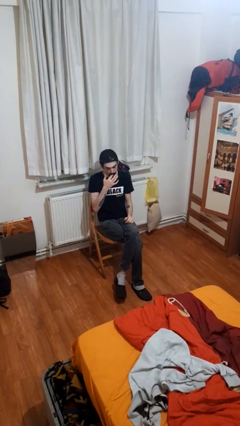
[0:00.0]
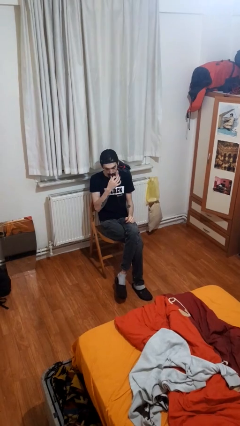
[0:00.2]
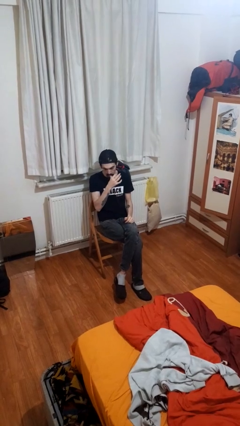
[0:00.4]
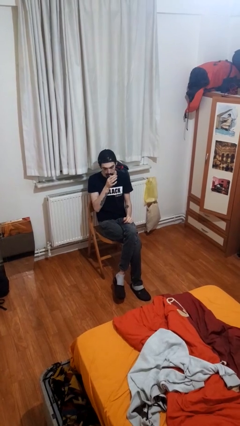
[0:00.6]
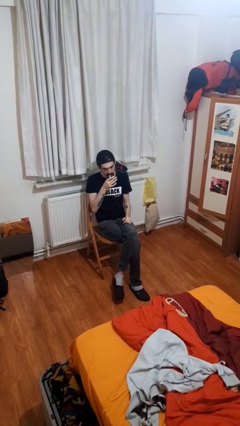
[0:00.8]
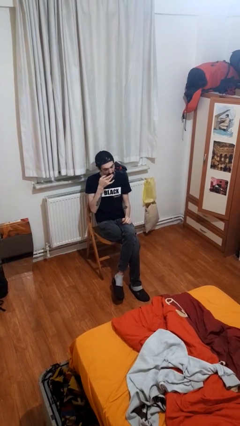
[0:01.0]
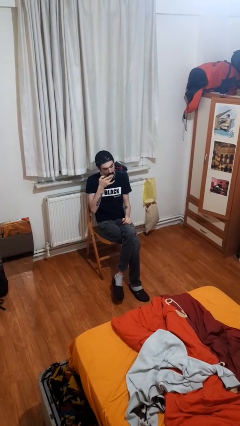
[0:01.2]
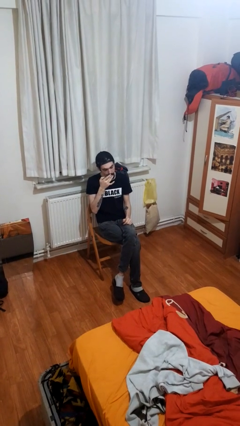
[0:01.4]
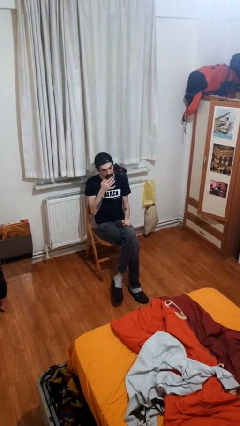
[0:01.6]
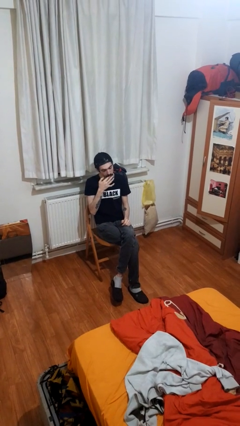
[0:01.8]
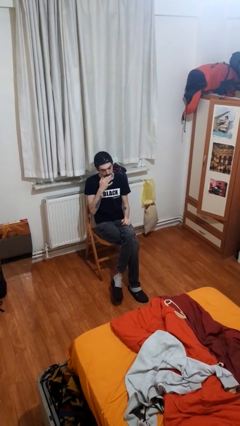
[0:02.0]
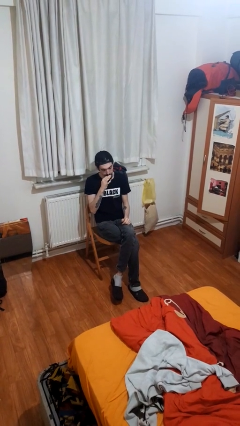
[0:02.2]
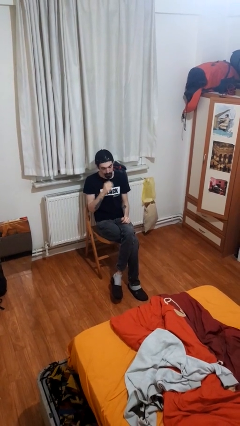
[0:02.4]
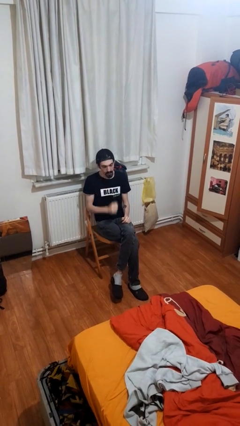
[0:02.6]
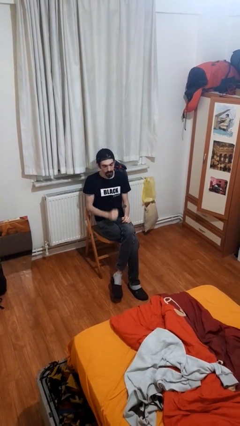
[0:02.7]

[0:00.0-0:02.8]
person licks fingers

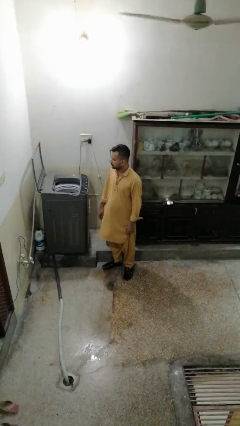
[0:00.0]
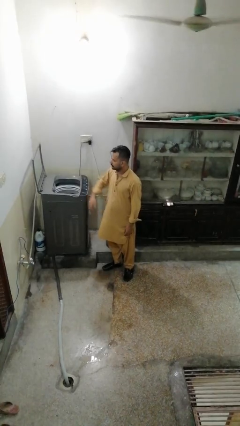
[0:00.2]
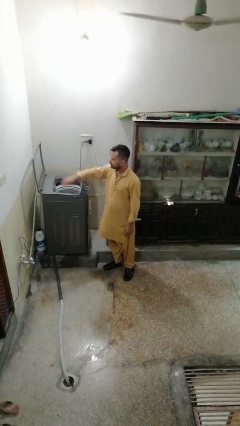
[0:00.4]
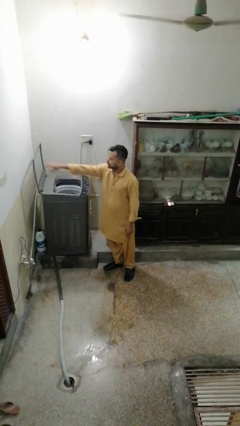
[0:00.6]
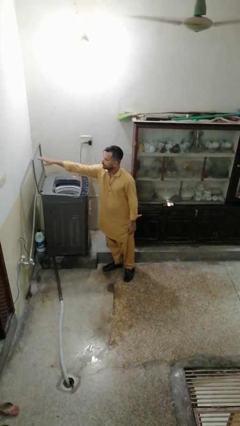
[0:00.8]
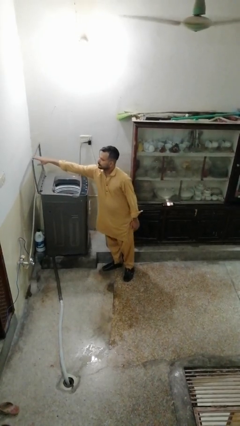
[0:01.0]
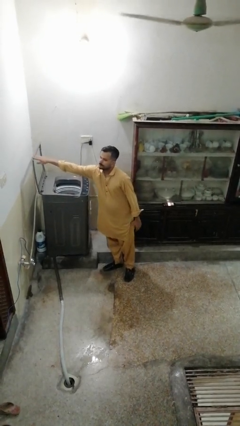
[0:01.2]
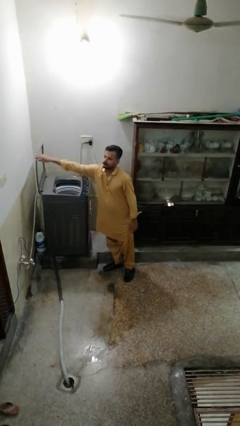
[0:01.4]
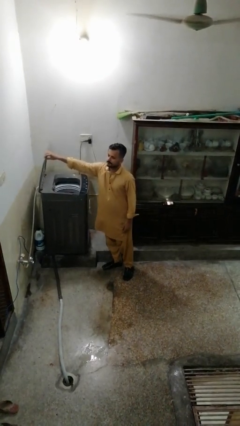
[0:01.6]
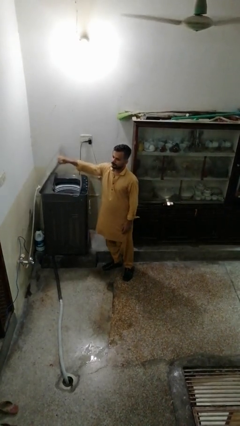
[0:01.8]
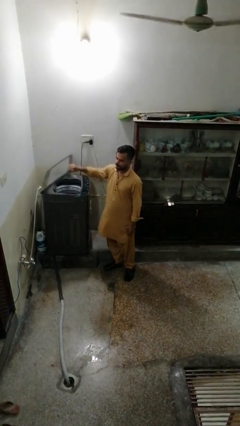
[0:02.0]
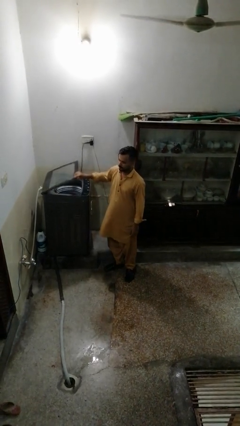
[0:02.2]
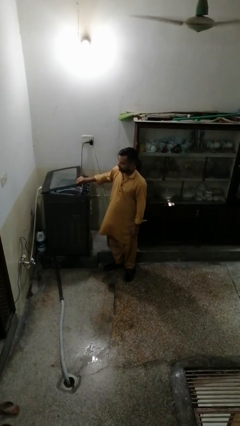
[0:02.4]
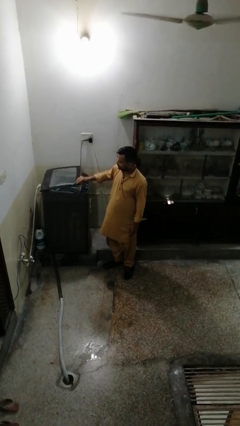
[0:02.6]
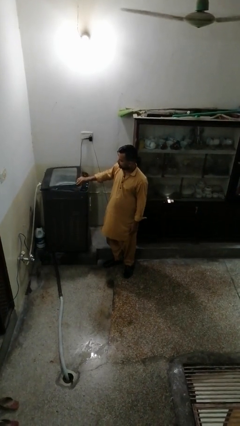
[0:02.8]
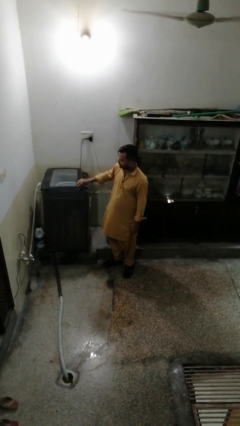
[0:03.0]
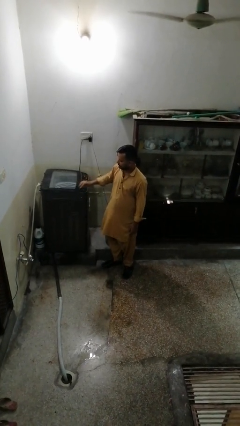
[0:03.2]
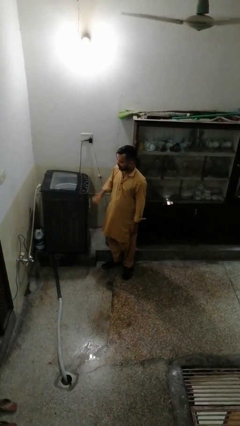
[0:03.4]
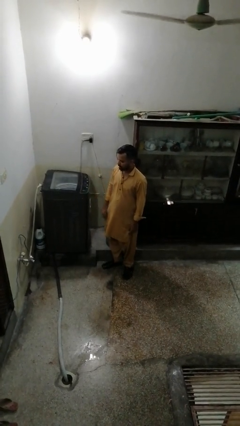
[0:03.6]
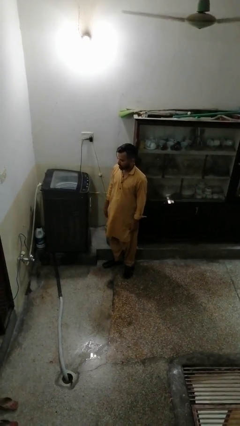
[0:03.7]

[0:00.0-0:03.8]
person closes clothes washer

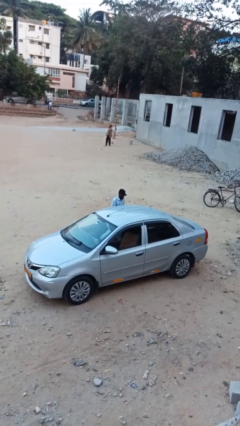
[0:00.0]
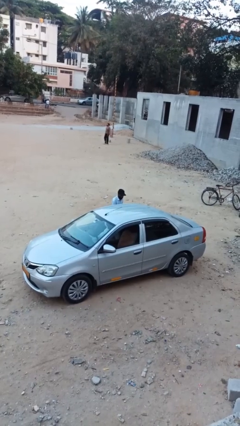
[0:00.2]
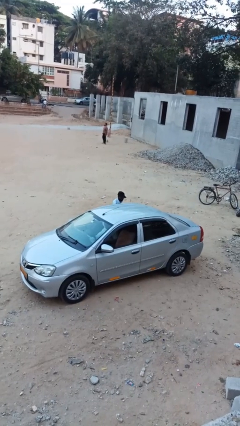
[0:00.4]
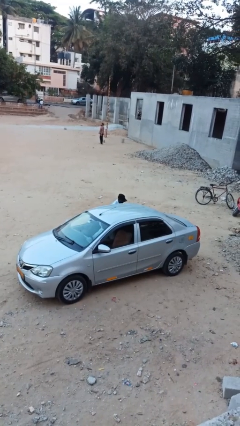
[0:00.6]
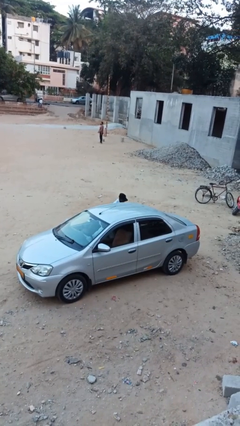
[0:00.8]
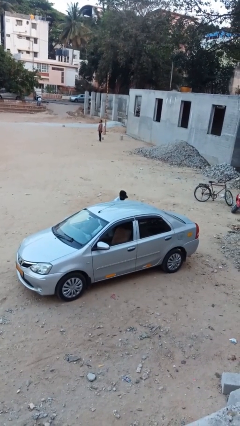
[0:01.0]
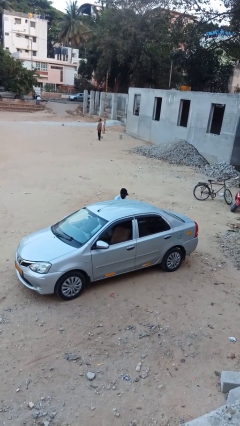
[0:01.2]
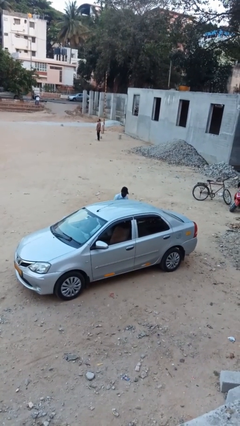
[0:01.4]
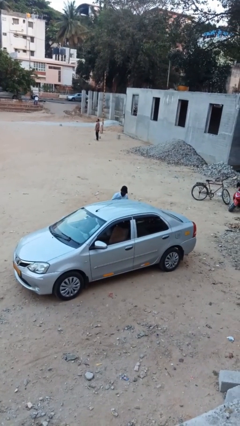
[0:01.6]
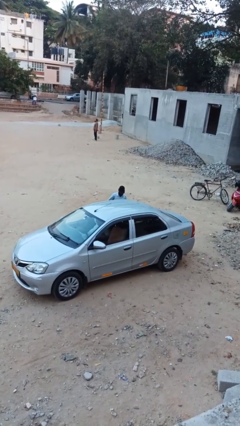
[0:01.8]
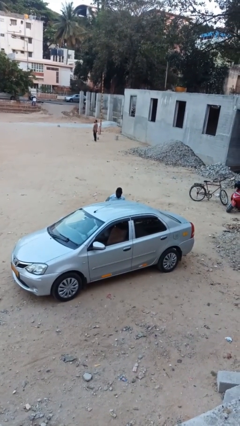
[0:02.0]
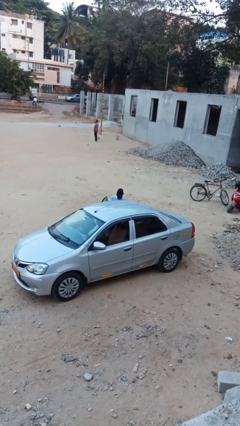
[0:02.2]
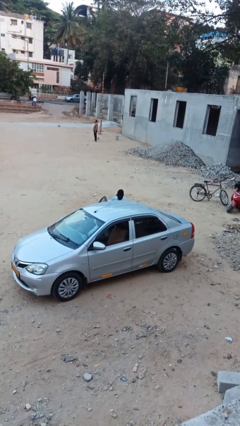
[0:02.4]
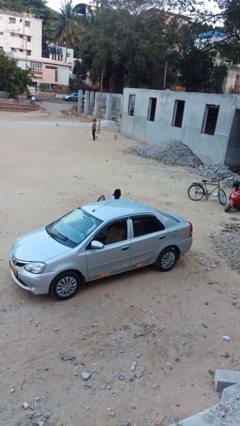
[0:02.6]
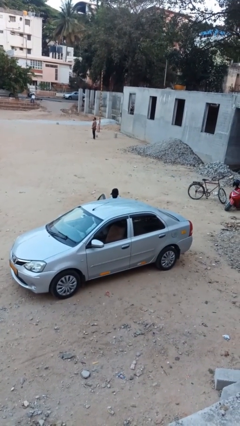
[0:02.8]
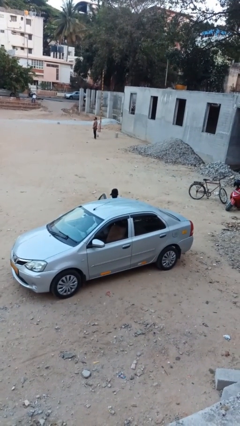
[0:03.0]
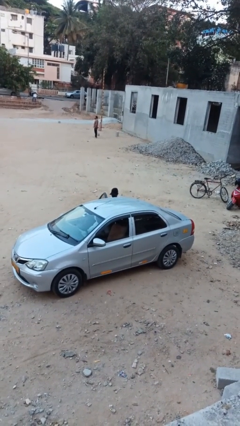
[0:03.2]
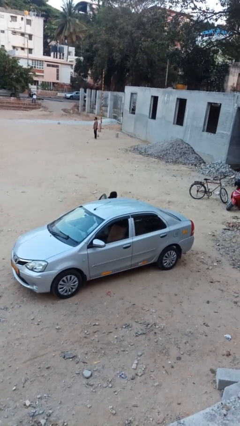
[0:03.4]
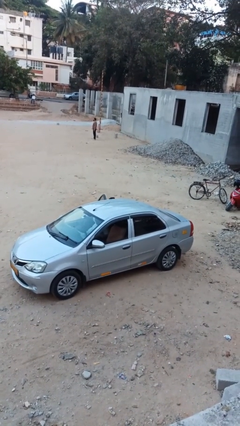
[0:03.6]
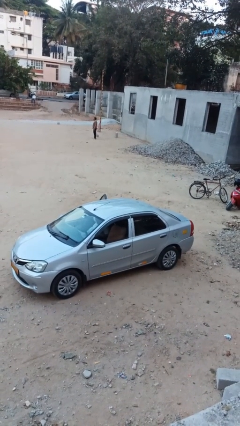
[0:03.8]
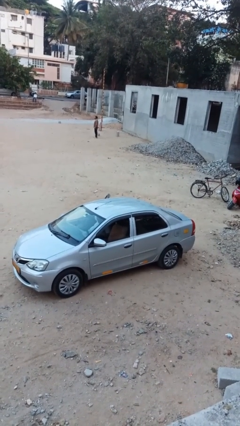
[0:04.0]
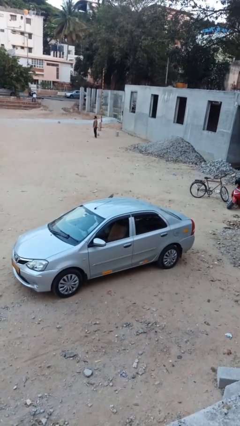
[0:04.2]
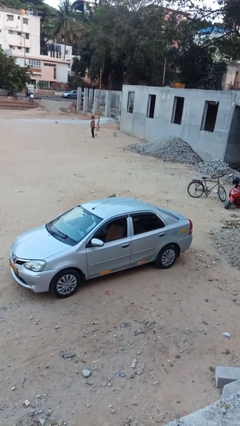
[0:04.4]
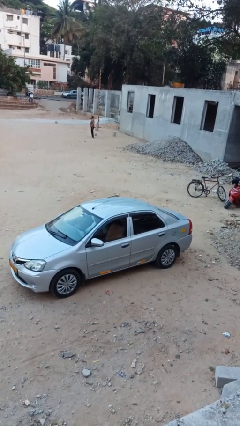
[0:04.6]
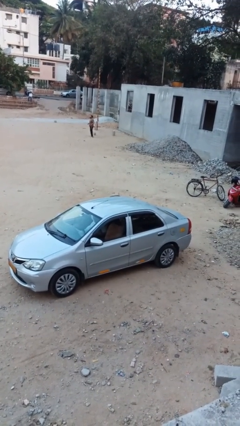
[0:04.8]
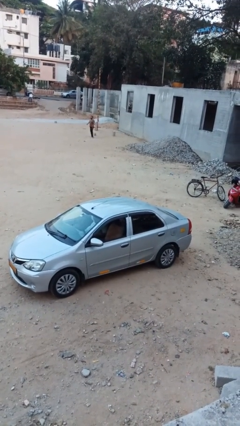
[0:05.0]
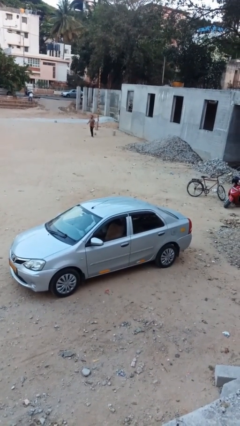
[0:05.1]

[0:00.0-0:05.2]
person enters car

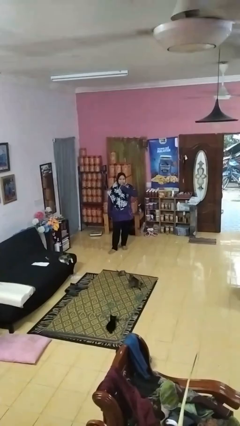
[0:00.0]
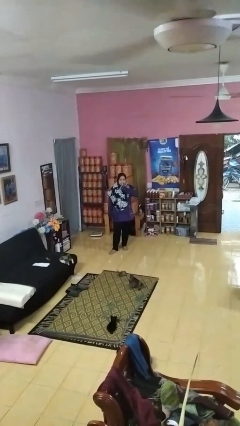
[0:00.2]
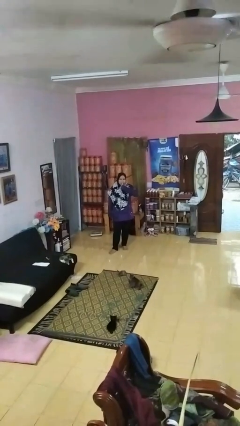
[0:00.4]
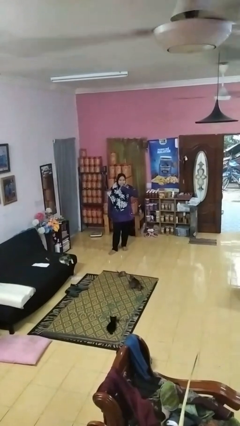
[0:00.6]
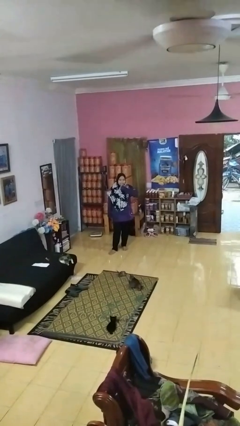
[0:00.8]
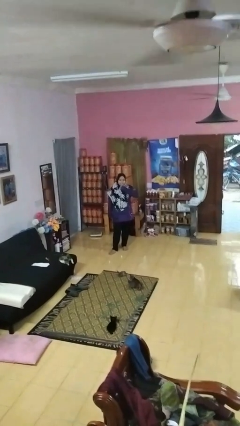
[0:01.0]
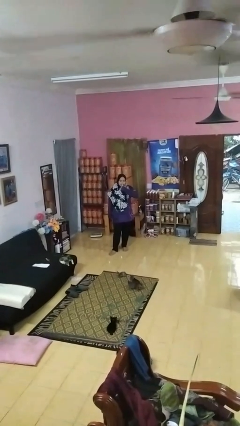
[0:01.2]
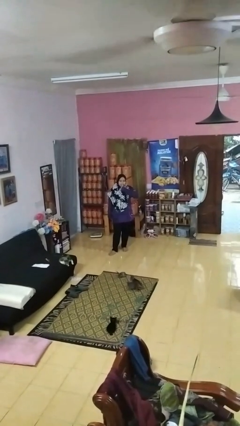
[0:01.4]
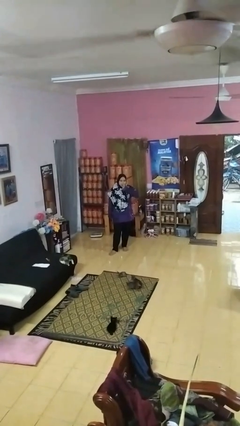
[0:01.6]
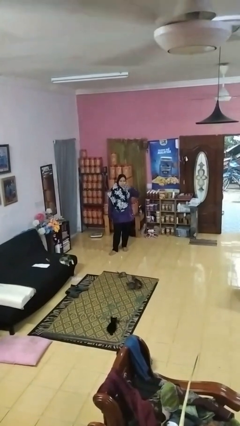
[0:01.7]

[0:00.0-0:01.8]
person gestures be quiet

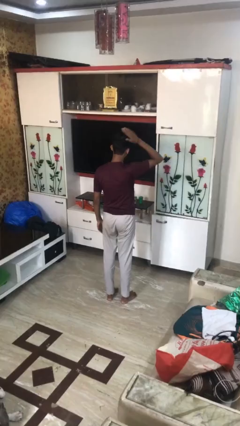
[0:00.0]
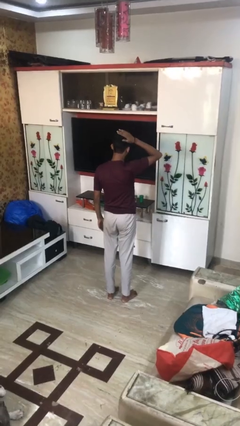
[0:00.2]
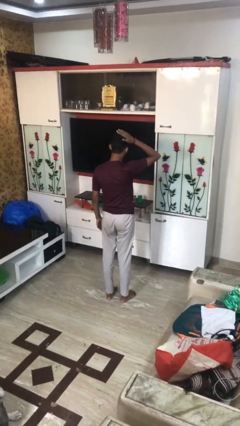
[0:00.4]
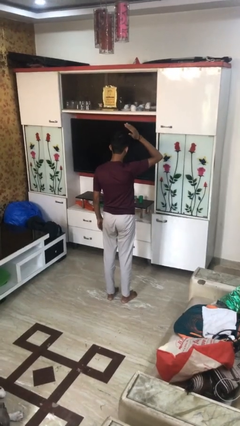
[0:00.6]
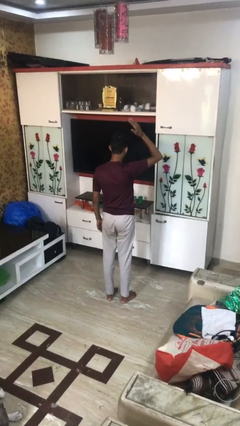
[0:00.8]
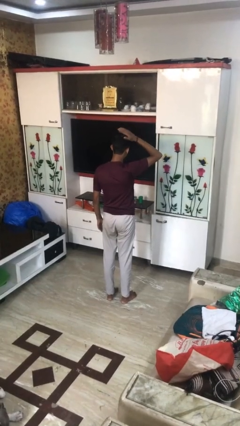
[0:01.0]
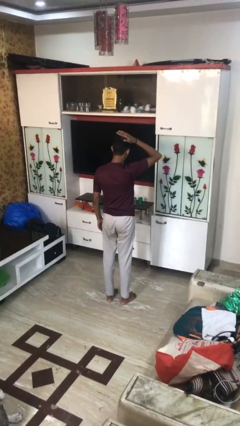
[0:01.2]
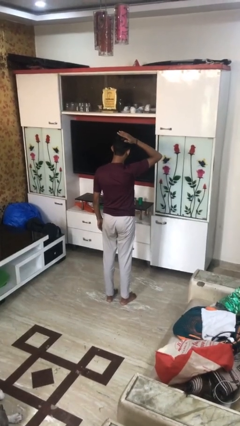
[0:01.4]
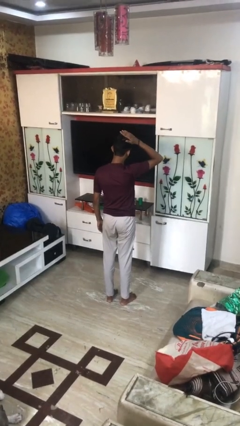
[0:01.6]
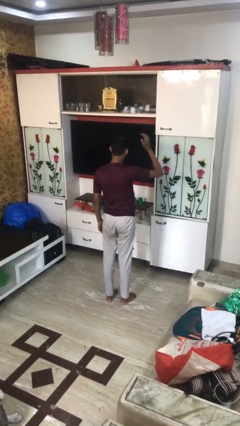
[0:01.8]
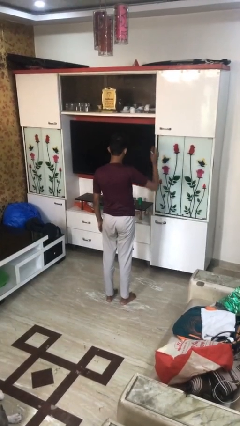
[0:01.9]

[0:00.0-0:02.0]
person pats head

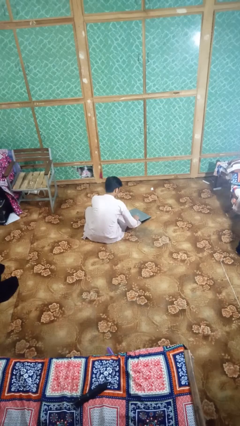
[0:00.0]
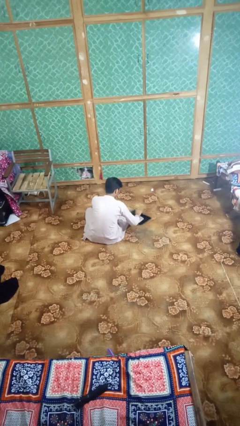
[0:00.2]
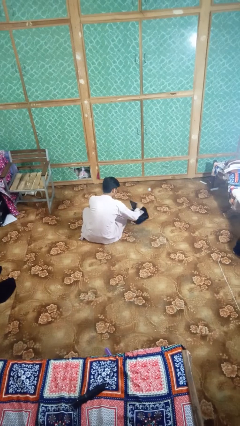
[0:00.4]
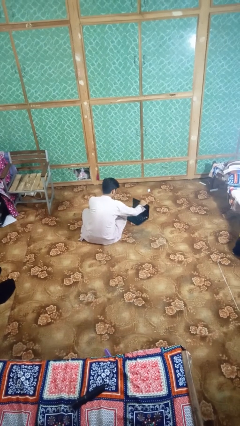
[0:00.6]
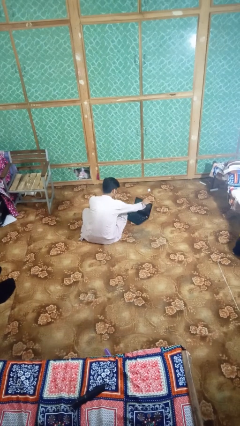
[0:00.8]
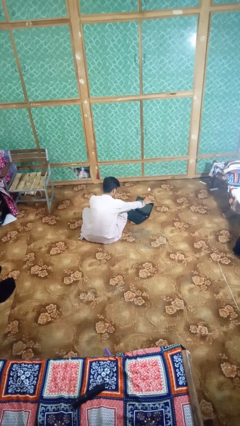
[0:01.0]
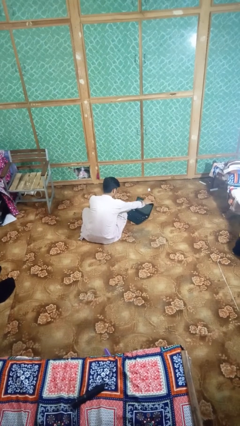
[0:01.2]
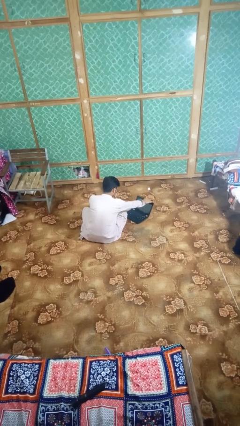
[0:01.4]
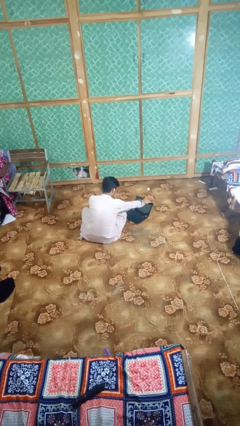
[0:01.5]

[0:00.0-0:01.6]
person opens laptop

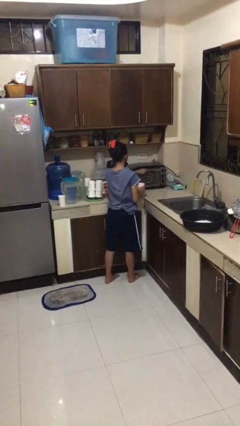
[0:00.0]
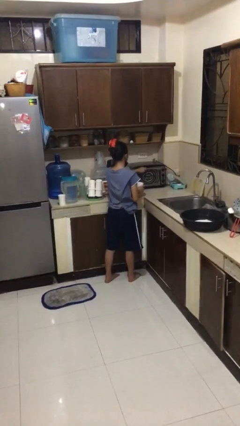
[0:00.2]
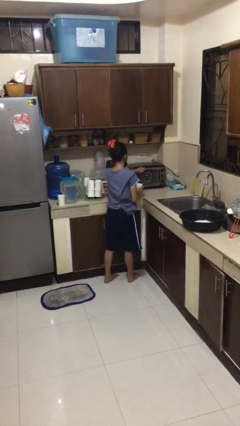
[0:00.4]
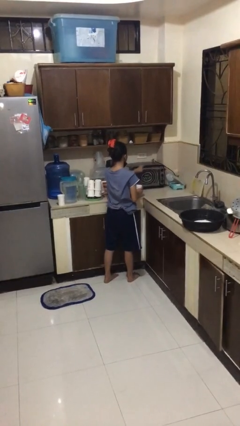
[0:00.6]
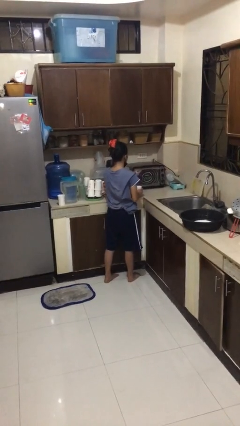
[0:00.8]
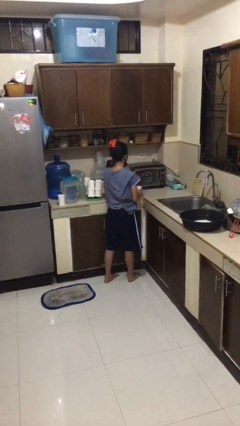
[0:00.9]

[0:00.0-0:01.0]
person closes microwave
